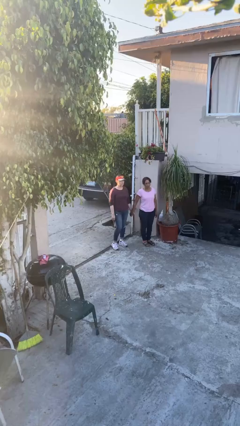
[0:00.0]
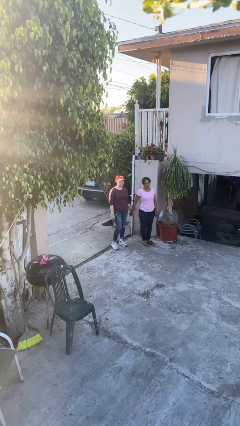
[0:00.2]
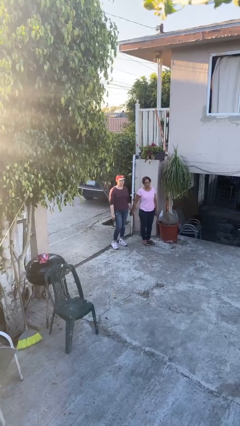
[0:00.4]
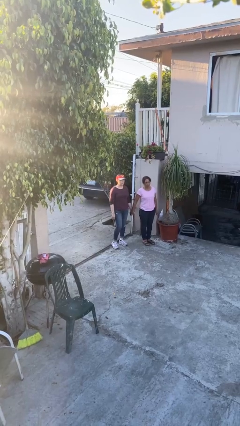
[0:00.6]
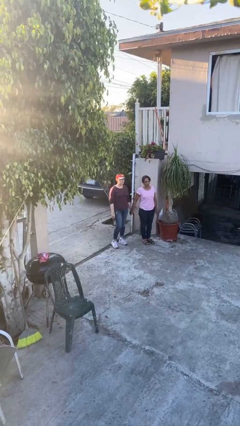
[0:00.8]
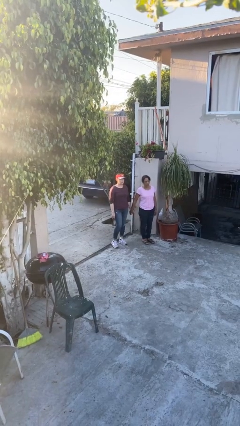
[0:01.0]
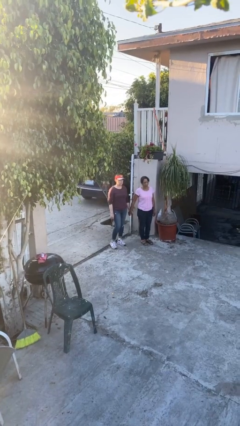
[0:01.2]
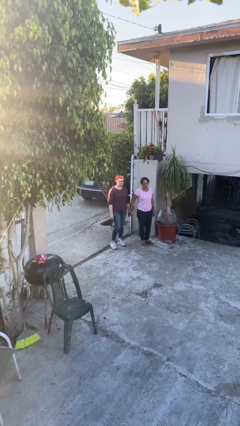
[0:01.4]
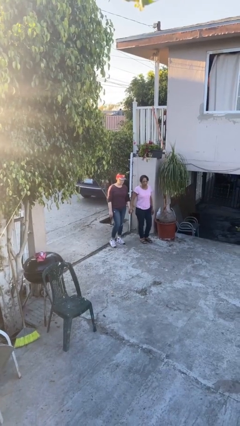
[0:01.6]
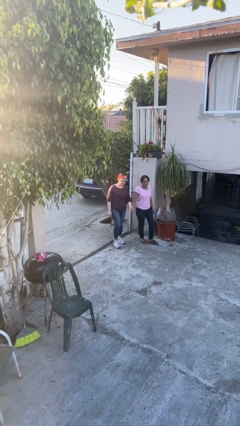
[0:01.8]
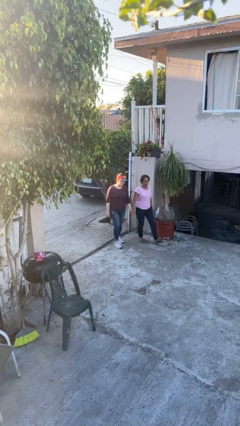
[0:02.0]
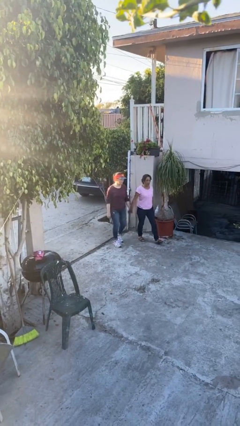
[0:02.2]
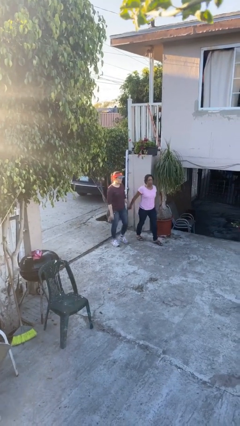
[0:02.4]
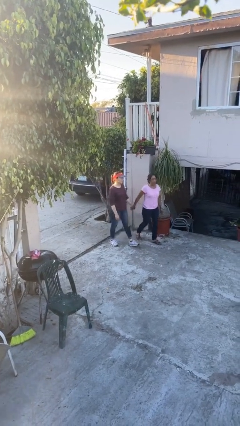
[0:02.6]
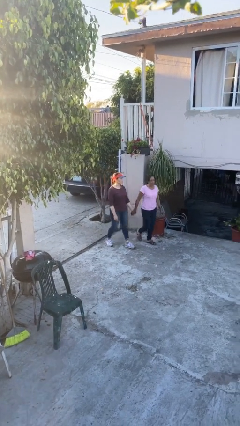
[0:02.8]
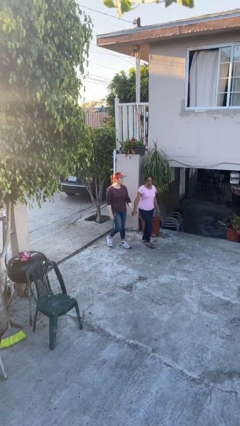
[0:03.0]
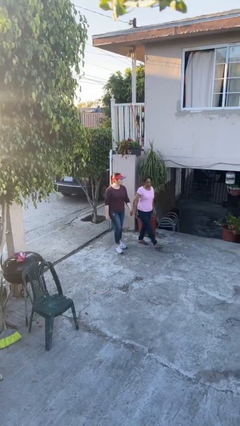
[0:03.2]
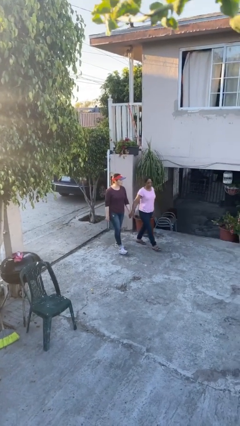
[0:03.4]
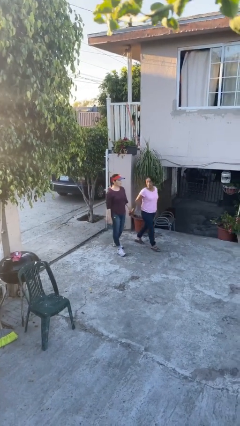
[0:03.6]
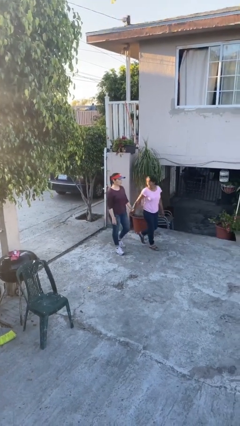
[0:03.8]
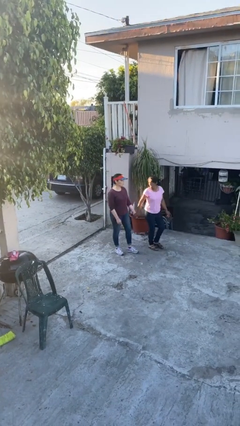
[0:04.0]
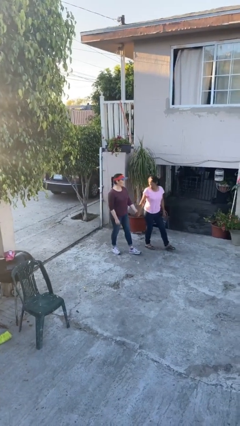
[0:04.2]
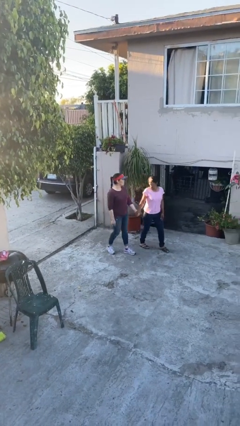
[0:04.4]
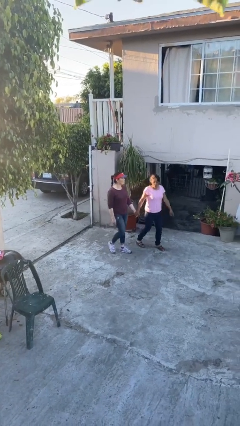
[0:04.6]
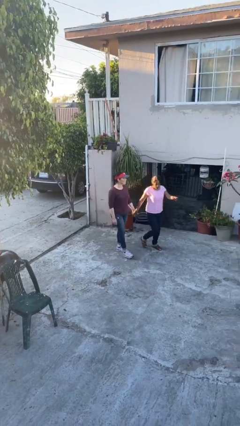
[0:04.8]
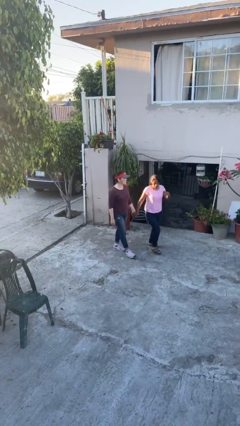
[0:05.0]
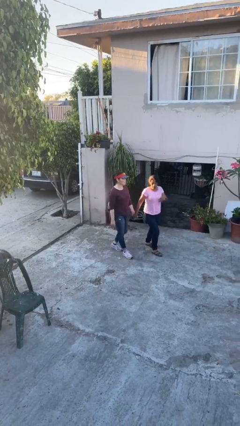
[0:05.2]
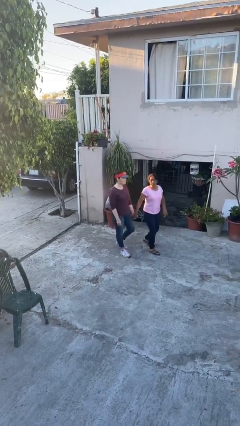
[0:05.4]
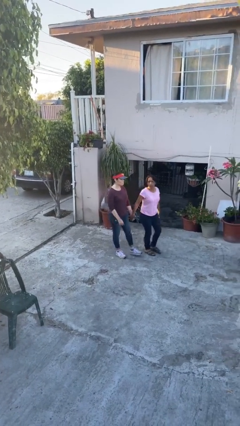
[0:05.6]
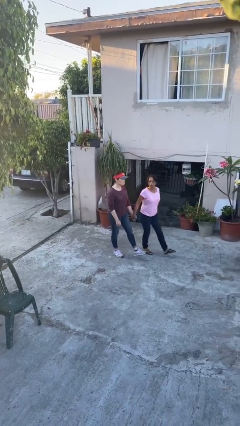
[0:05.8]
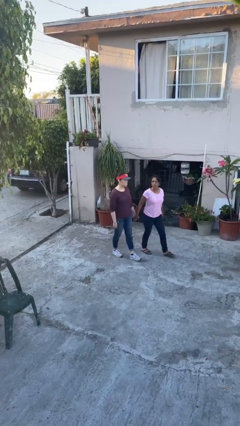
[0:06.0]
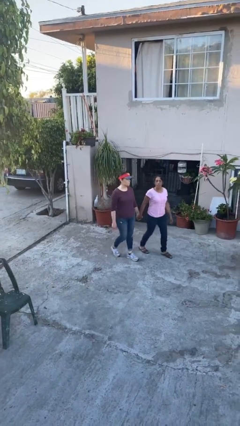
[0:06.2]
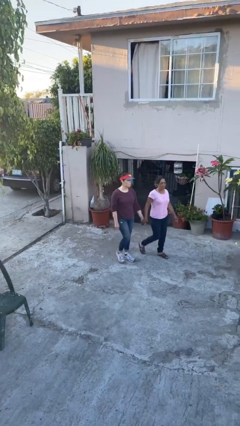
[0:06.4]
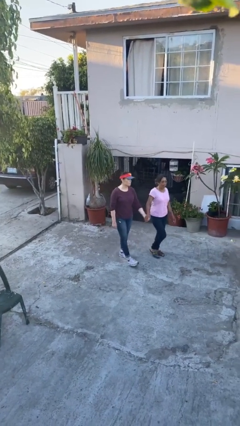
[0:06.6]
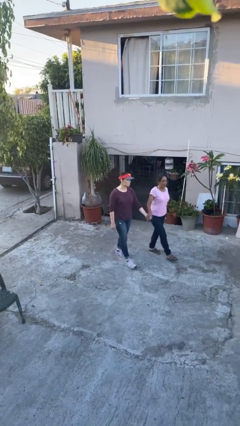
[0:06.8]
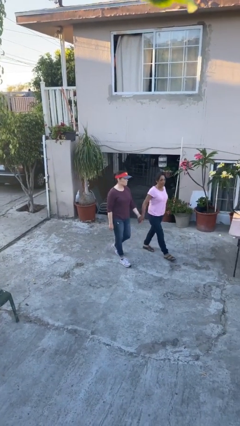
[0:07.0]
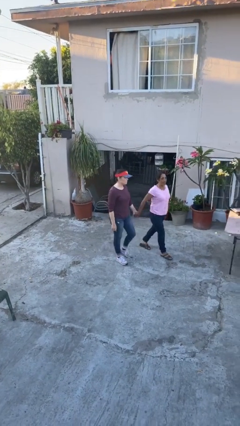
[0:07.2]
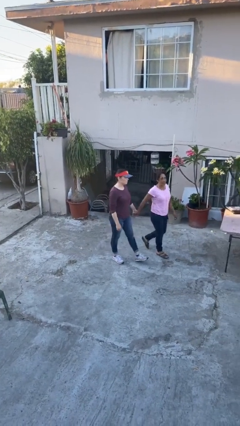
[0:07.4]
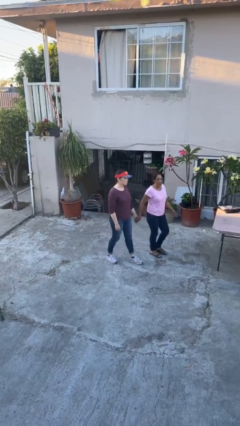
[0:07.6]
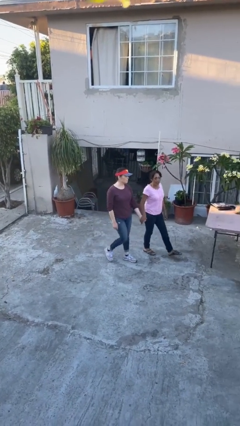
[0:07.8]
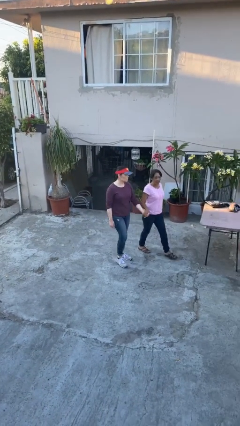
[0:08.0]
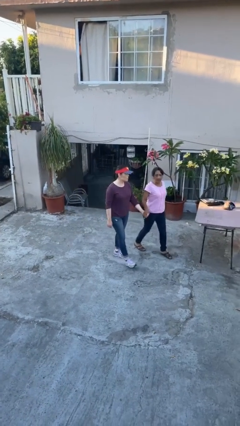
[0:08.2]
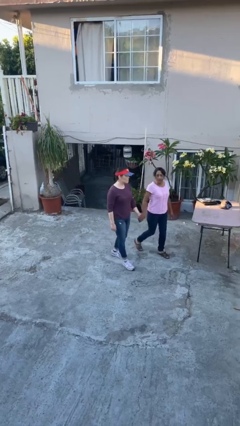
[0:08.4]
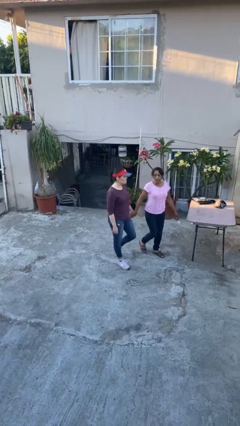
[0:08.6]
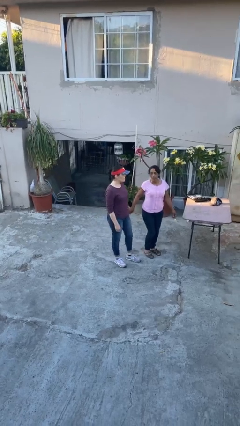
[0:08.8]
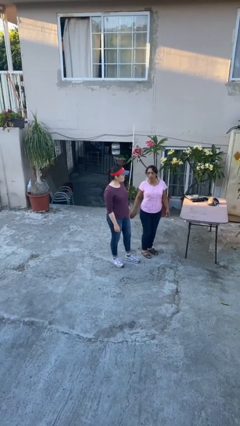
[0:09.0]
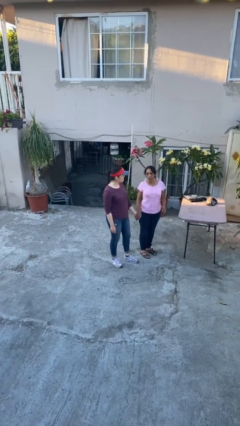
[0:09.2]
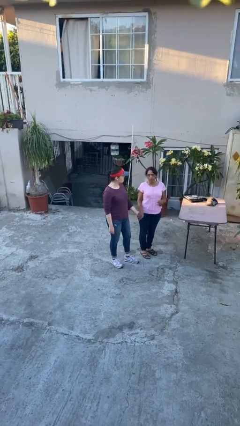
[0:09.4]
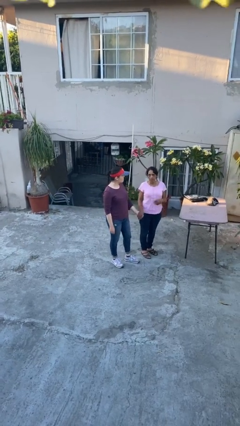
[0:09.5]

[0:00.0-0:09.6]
person holds hand

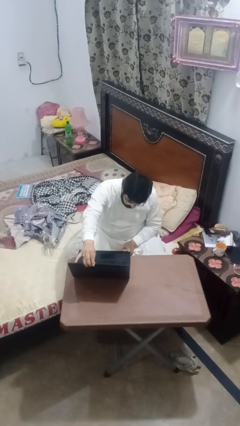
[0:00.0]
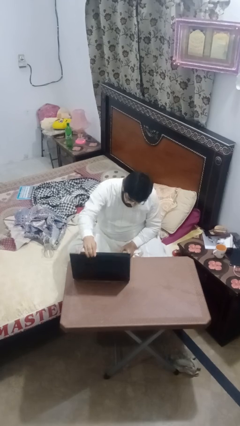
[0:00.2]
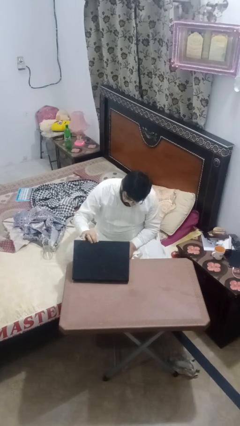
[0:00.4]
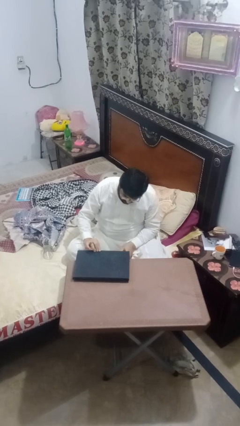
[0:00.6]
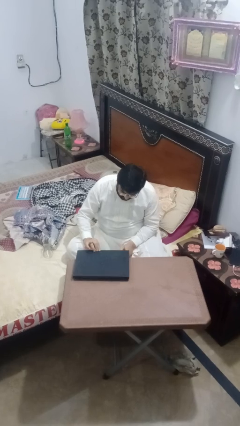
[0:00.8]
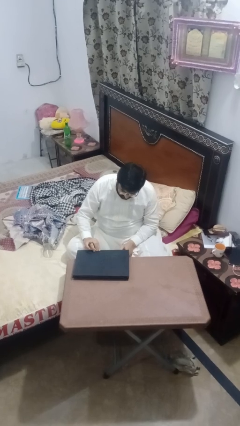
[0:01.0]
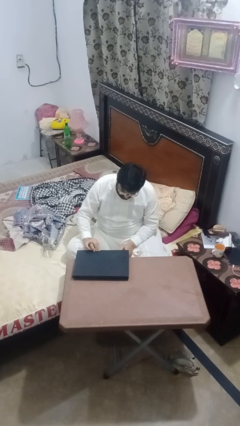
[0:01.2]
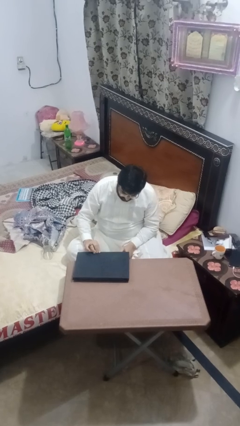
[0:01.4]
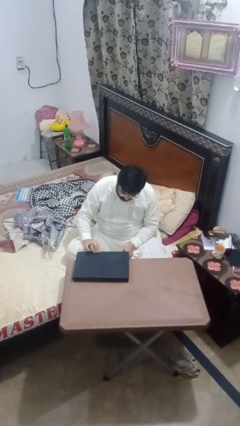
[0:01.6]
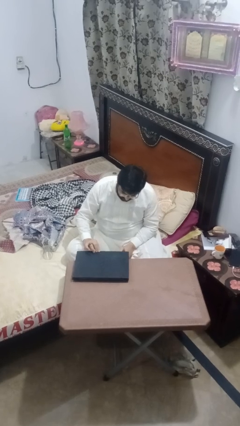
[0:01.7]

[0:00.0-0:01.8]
person closes laptop

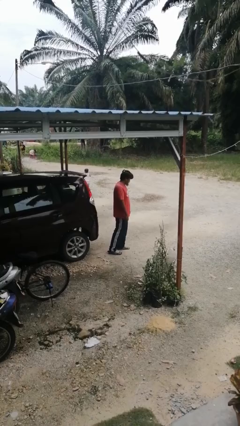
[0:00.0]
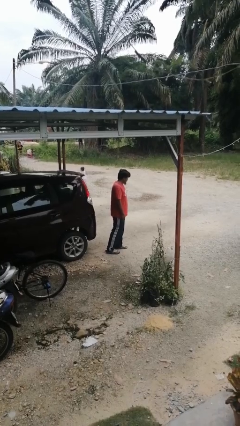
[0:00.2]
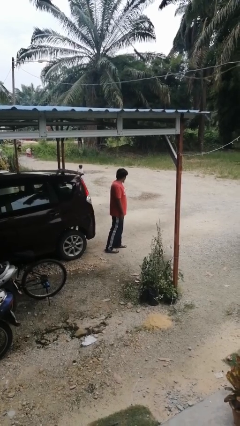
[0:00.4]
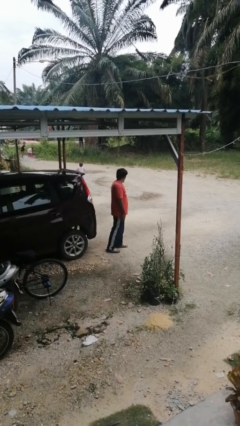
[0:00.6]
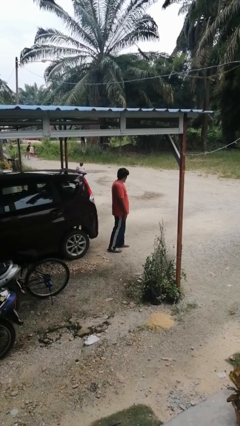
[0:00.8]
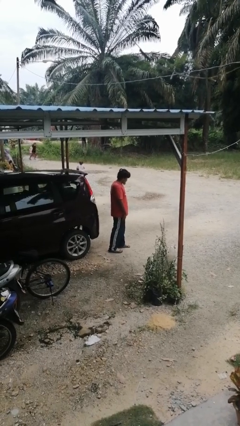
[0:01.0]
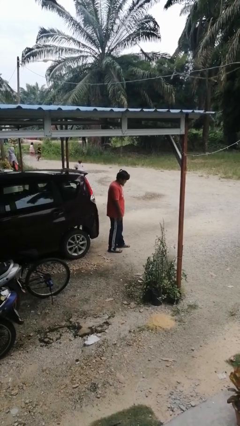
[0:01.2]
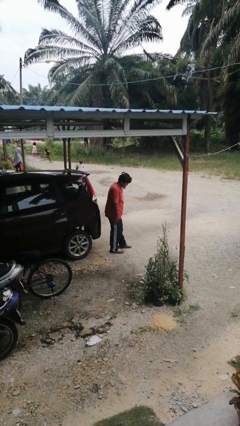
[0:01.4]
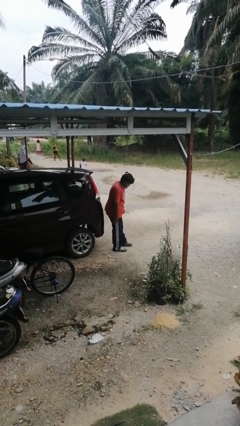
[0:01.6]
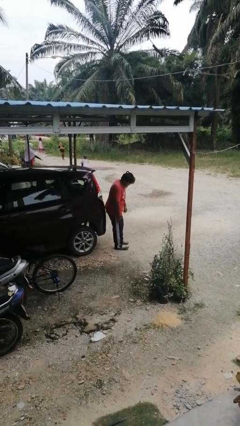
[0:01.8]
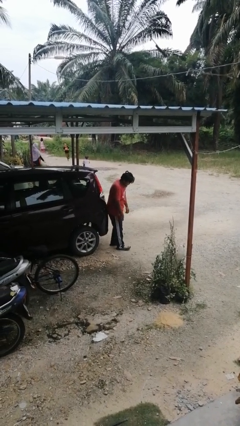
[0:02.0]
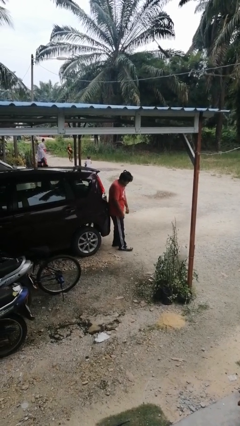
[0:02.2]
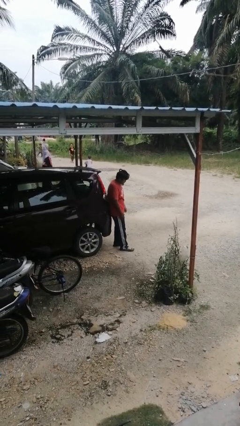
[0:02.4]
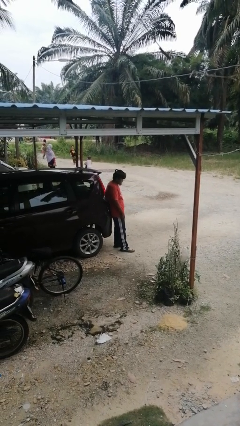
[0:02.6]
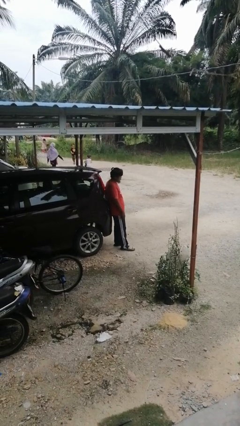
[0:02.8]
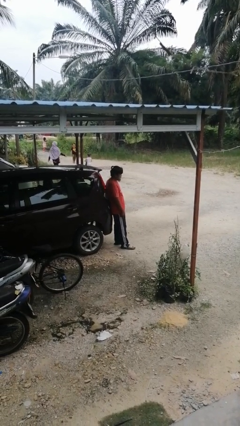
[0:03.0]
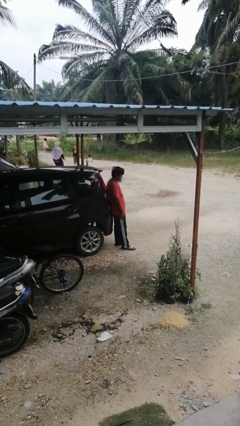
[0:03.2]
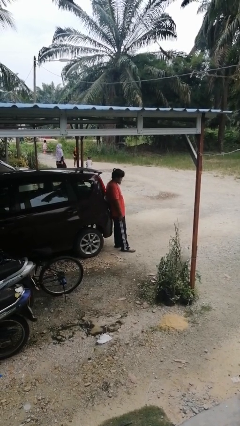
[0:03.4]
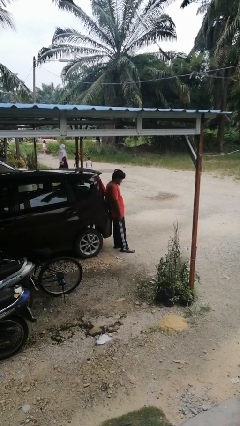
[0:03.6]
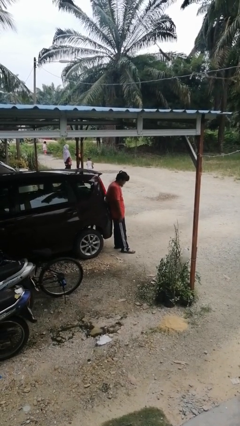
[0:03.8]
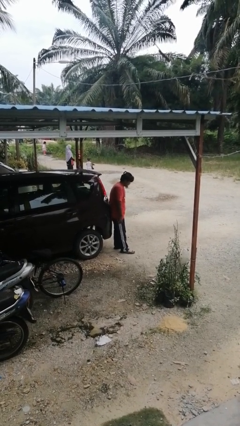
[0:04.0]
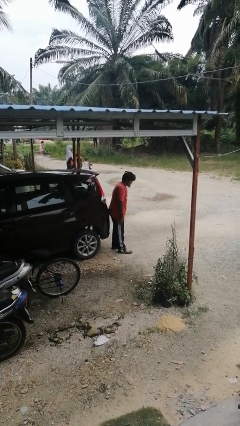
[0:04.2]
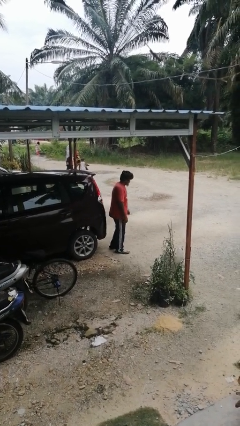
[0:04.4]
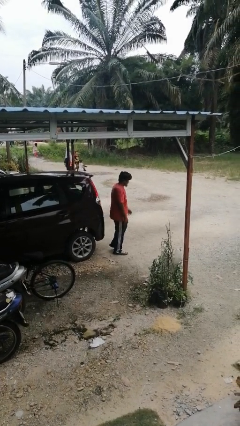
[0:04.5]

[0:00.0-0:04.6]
person leans against car

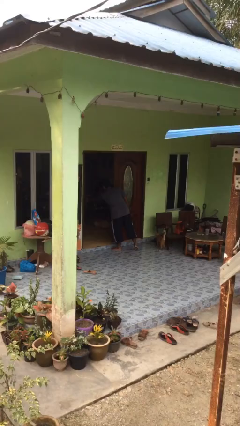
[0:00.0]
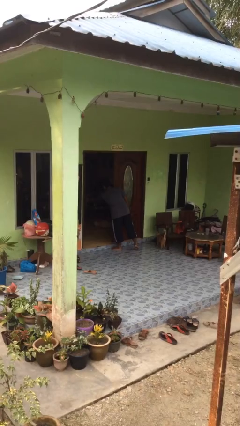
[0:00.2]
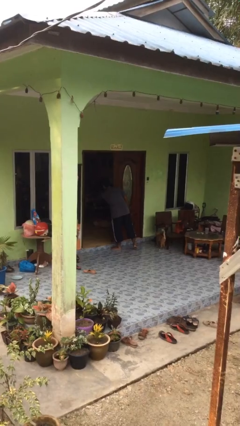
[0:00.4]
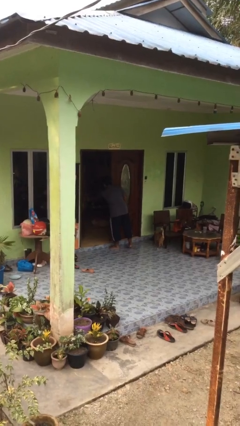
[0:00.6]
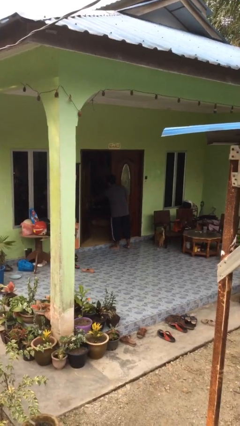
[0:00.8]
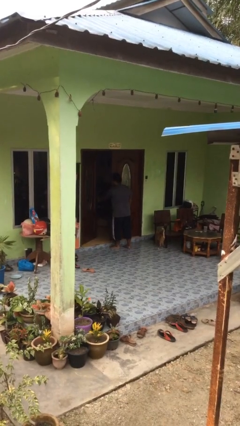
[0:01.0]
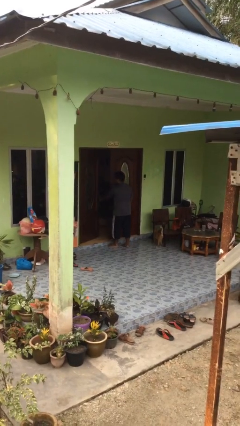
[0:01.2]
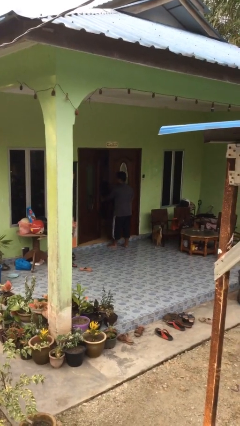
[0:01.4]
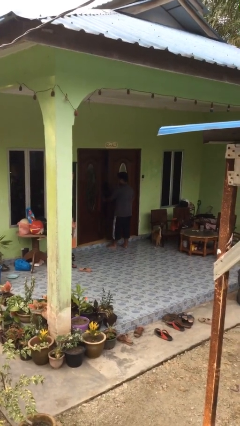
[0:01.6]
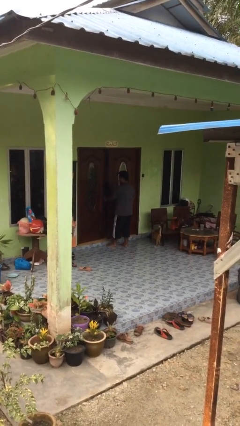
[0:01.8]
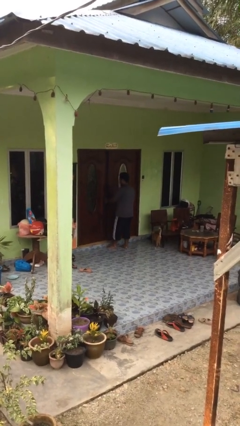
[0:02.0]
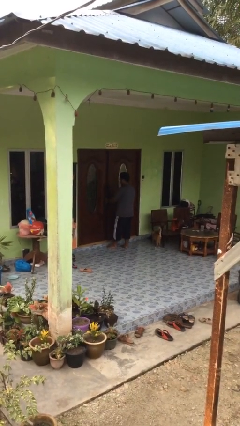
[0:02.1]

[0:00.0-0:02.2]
person closes facility door
